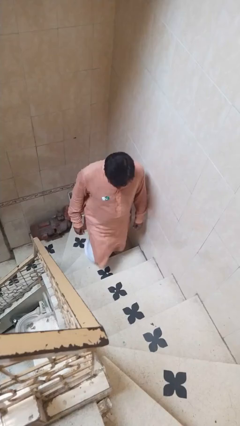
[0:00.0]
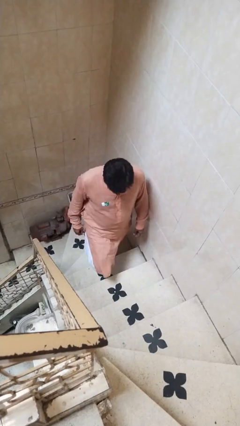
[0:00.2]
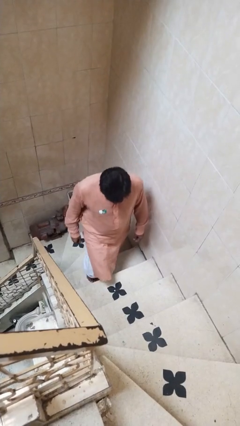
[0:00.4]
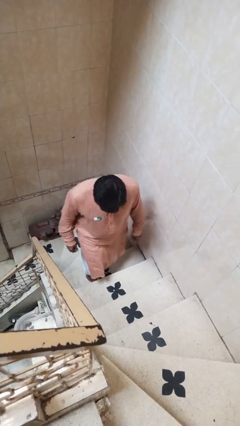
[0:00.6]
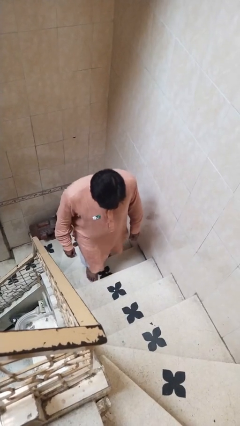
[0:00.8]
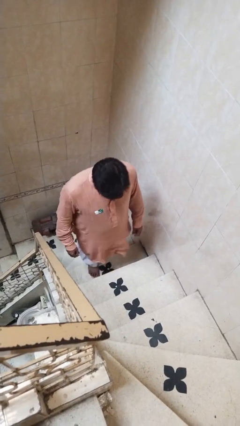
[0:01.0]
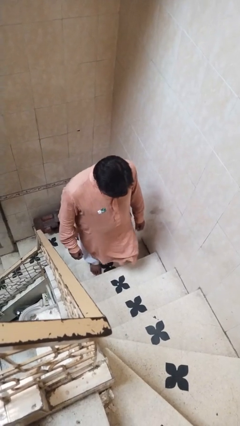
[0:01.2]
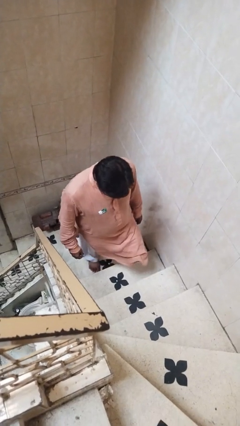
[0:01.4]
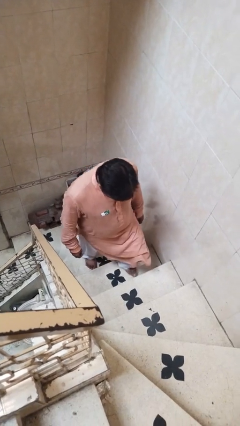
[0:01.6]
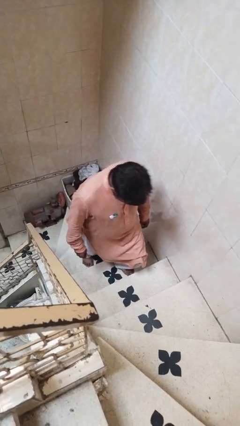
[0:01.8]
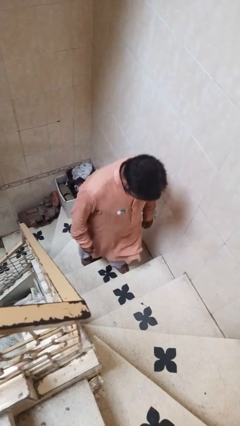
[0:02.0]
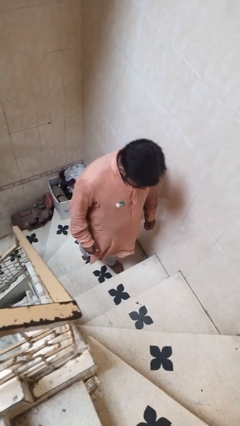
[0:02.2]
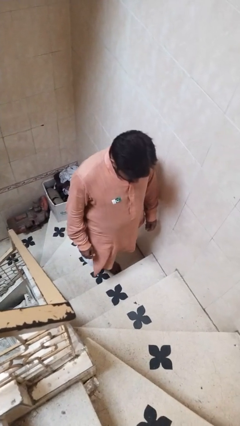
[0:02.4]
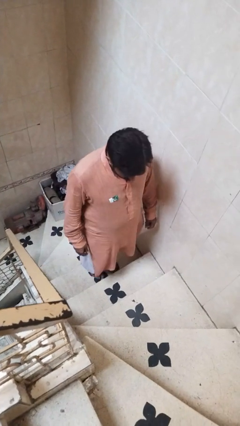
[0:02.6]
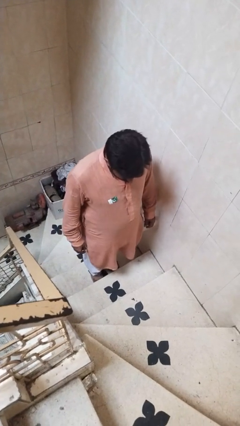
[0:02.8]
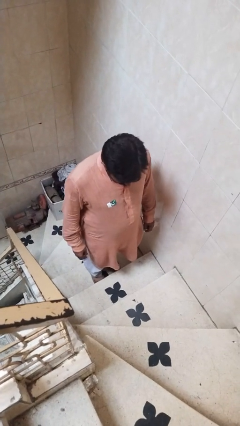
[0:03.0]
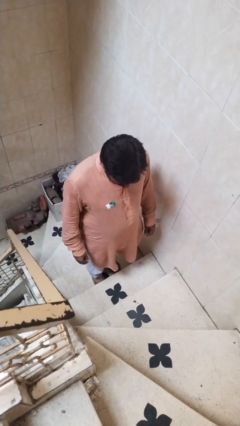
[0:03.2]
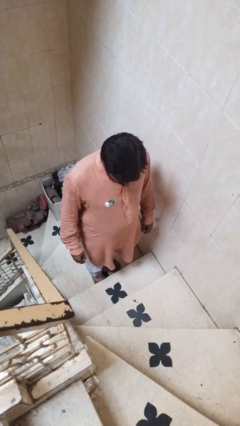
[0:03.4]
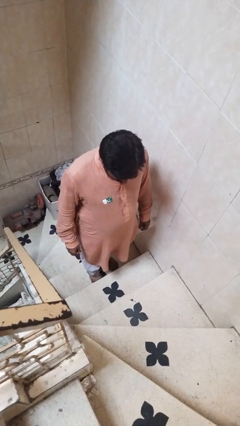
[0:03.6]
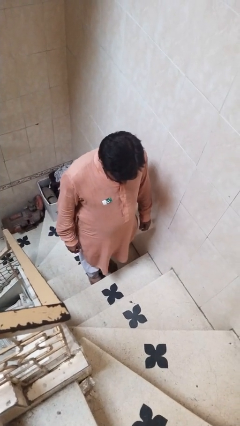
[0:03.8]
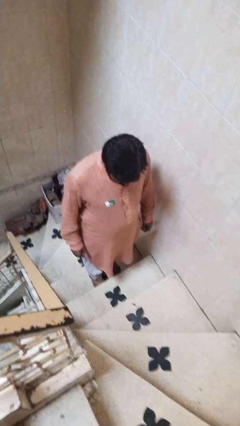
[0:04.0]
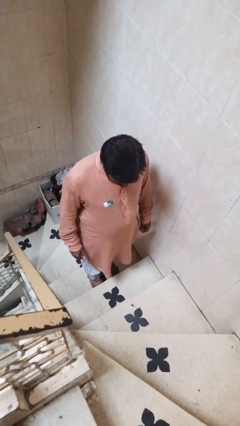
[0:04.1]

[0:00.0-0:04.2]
person climbs up stairs

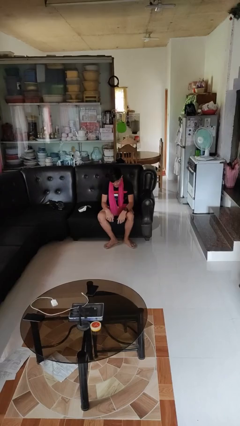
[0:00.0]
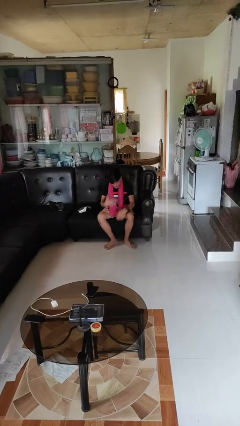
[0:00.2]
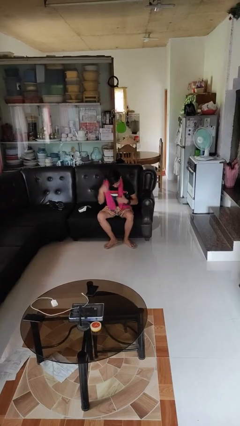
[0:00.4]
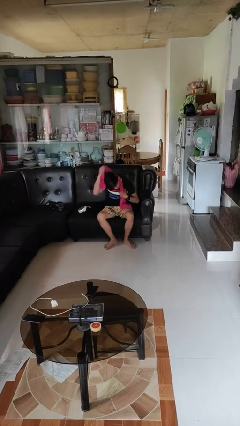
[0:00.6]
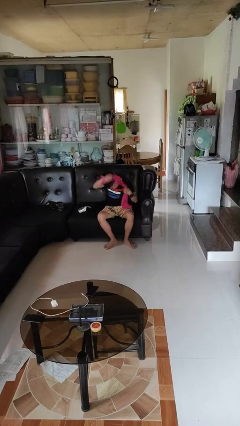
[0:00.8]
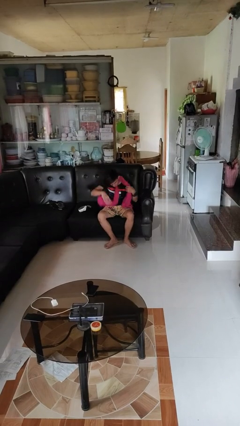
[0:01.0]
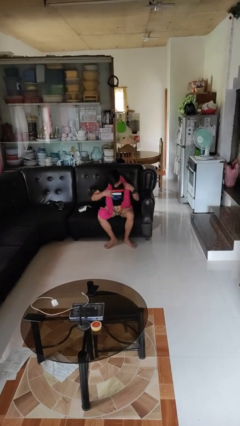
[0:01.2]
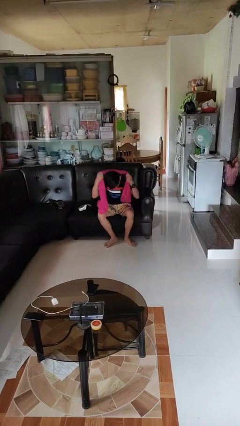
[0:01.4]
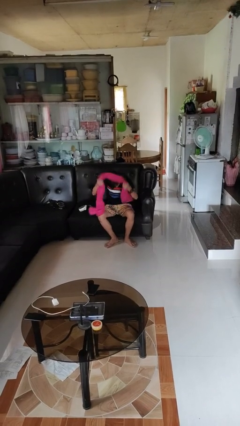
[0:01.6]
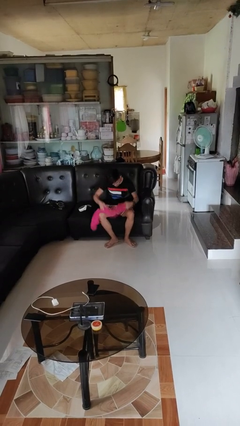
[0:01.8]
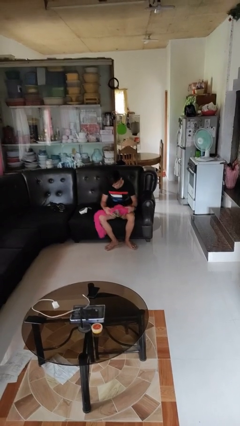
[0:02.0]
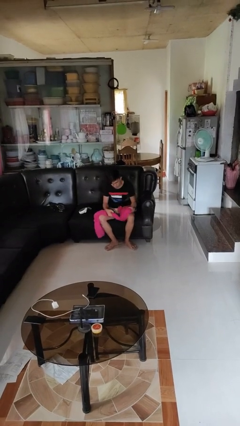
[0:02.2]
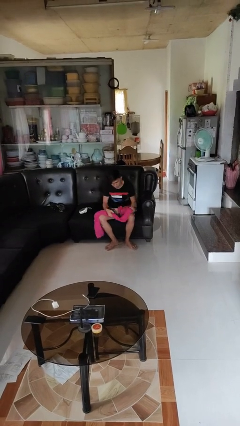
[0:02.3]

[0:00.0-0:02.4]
person takes off scarf

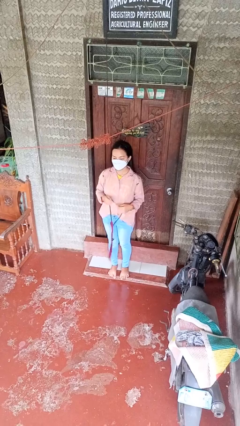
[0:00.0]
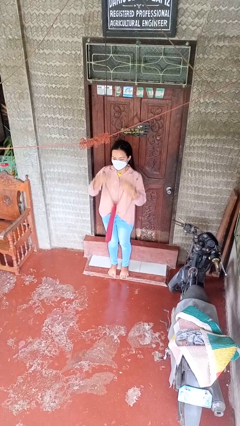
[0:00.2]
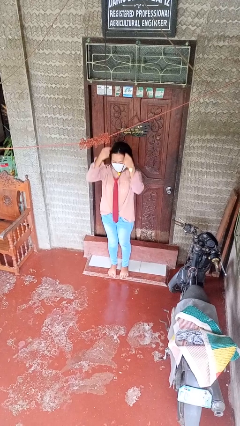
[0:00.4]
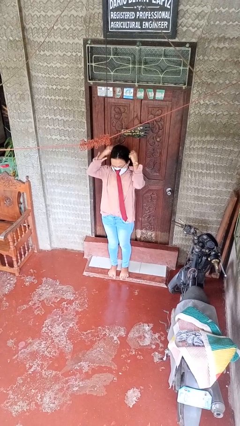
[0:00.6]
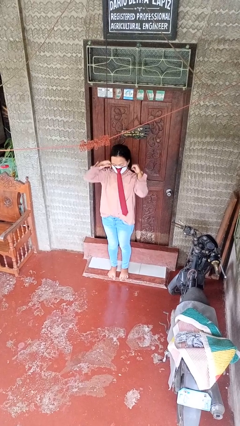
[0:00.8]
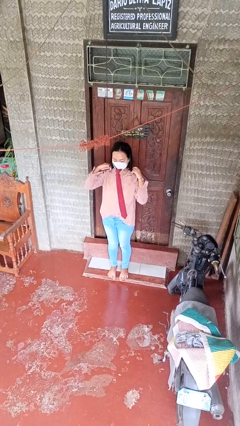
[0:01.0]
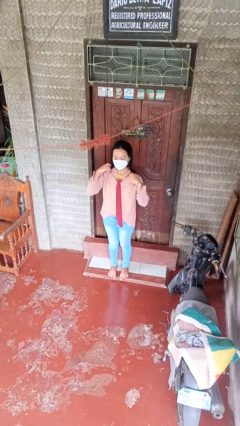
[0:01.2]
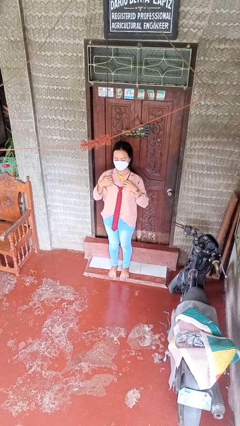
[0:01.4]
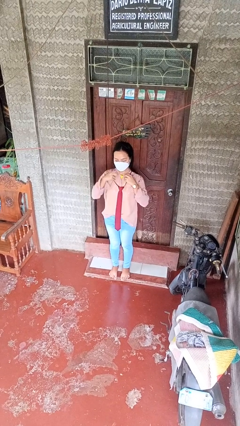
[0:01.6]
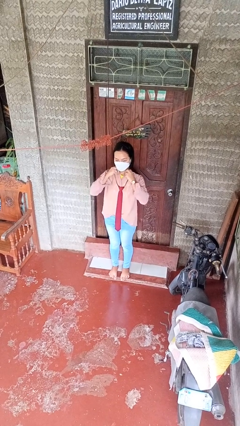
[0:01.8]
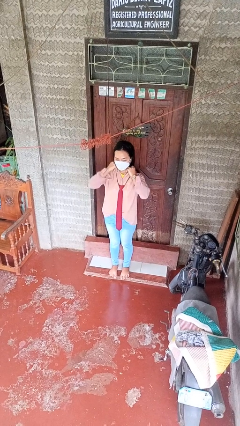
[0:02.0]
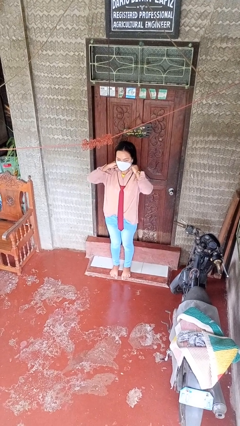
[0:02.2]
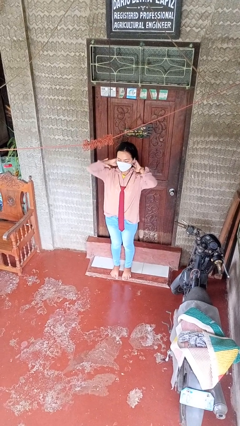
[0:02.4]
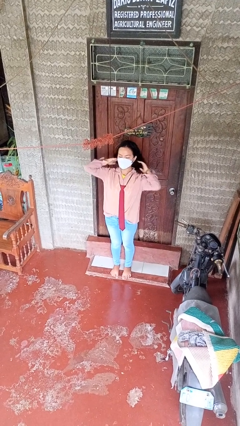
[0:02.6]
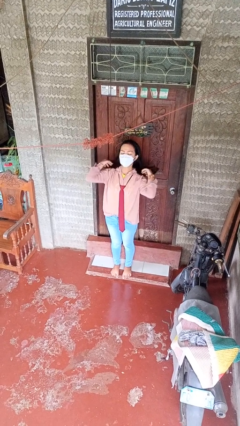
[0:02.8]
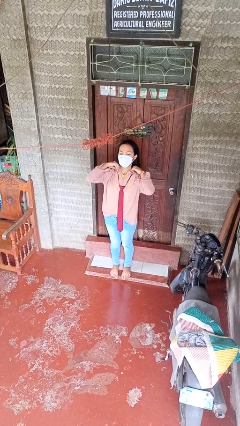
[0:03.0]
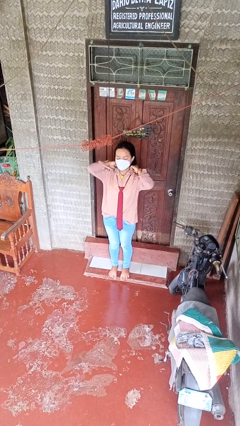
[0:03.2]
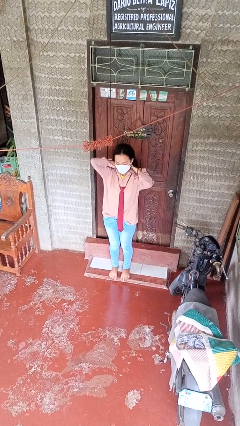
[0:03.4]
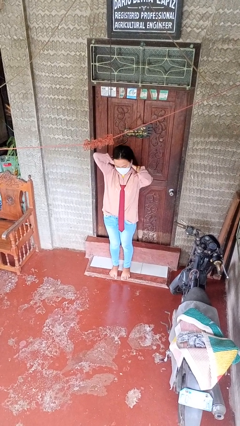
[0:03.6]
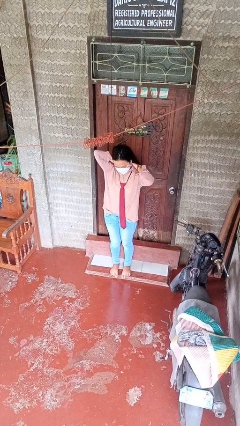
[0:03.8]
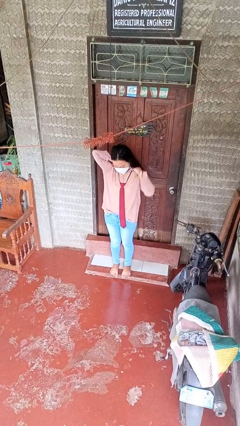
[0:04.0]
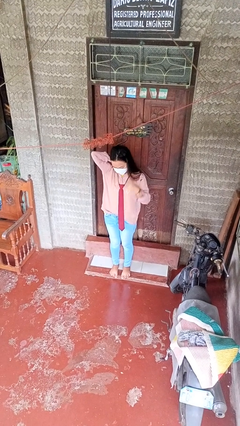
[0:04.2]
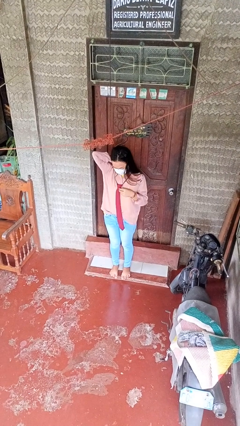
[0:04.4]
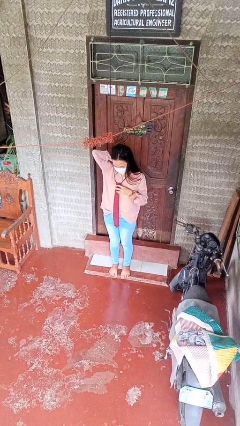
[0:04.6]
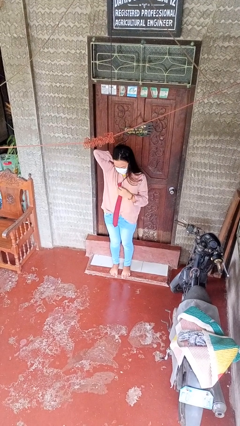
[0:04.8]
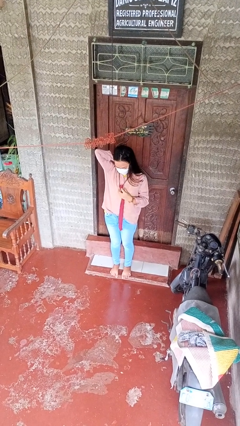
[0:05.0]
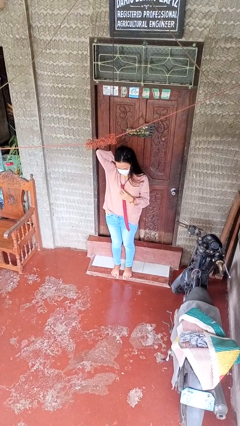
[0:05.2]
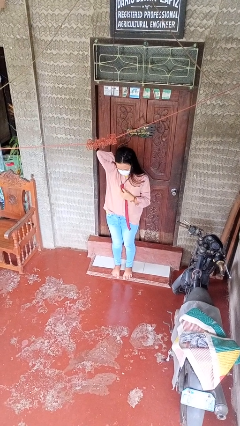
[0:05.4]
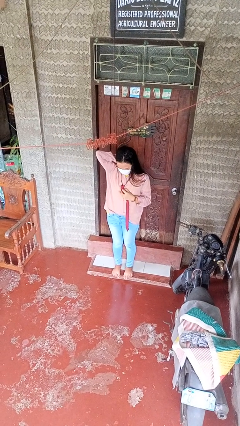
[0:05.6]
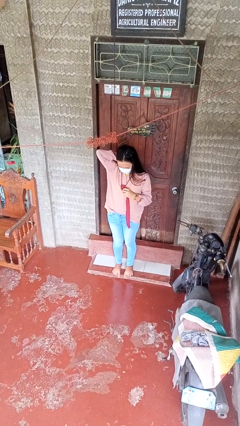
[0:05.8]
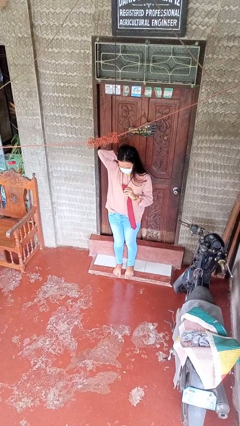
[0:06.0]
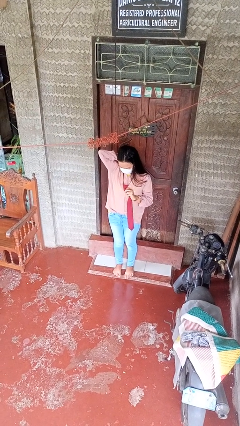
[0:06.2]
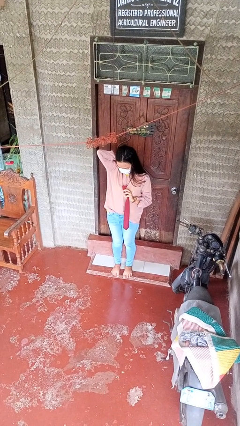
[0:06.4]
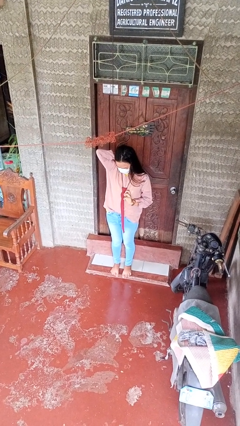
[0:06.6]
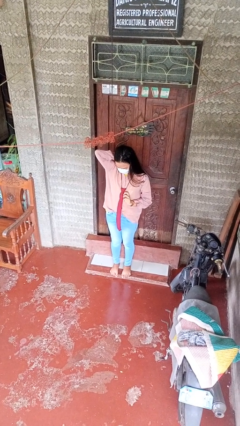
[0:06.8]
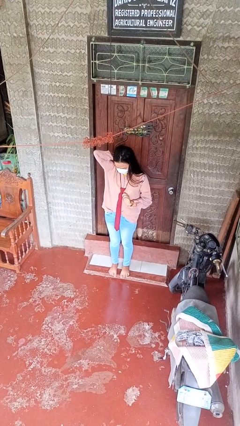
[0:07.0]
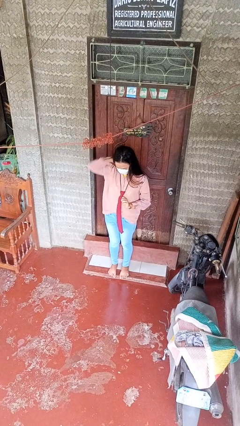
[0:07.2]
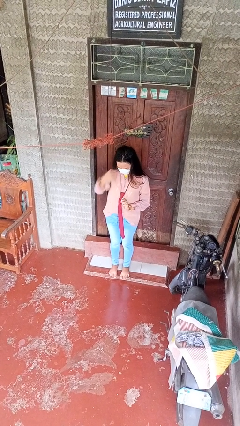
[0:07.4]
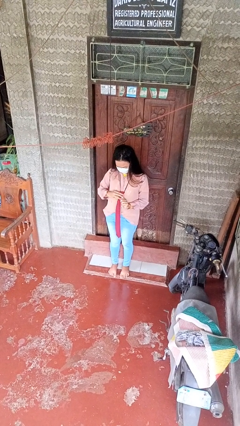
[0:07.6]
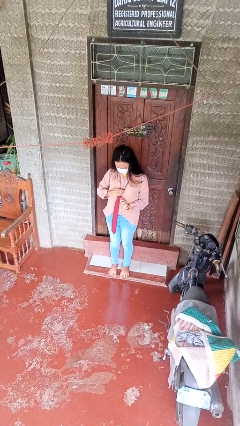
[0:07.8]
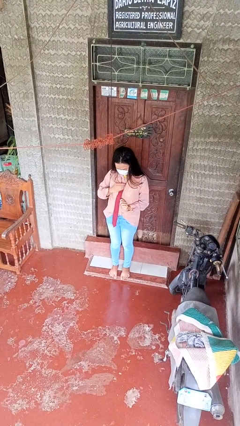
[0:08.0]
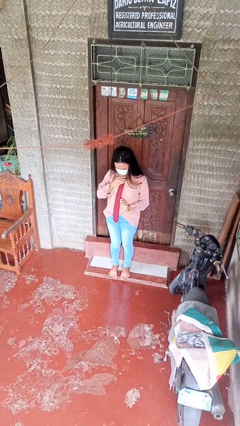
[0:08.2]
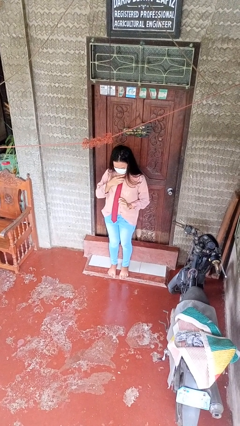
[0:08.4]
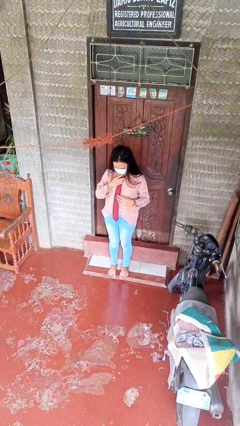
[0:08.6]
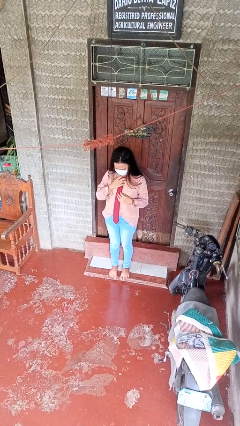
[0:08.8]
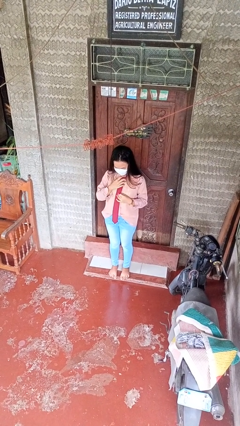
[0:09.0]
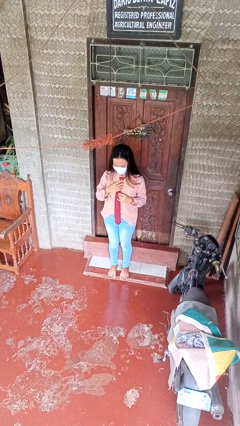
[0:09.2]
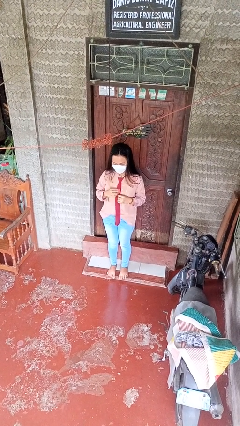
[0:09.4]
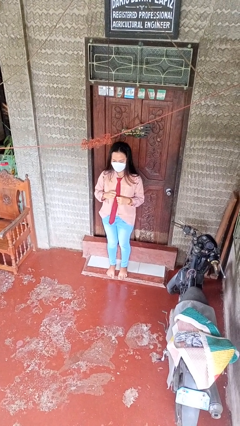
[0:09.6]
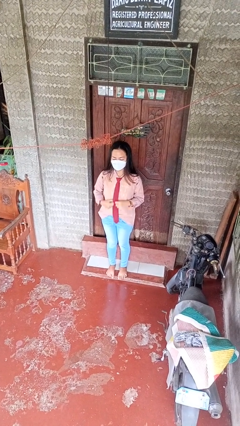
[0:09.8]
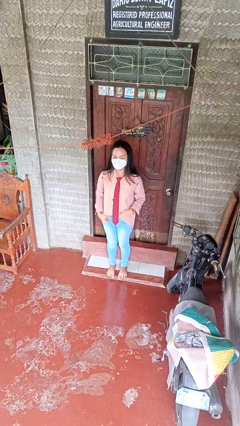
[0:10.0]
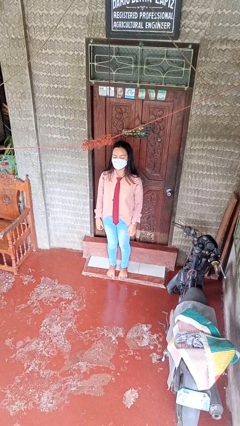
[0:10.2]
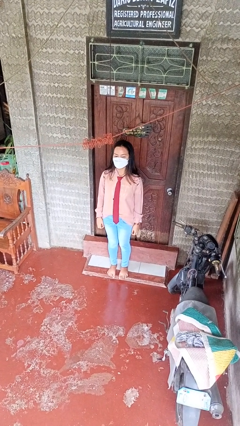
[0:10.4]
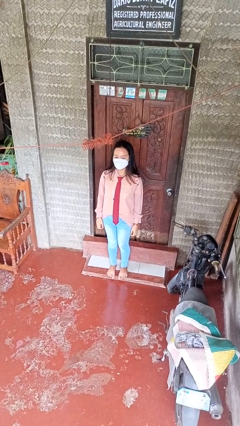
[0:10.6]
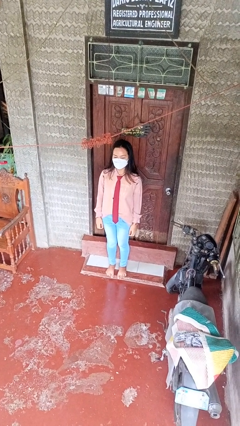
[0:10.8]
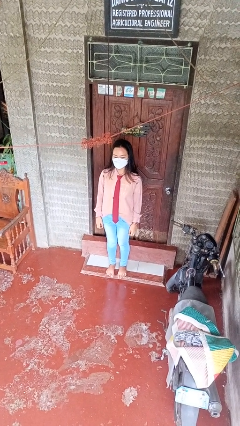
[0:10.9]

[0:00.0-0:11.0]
person puts on necktie

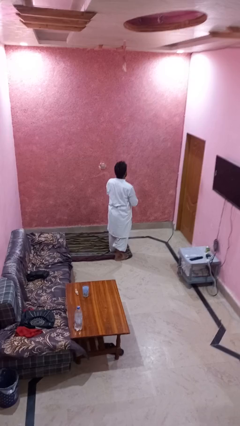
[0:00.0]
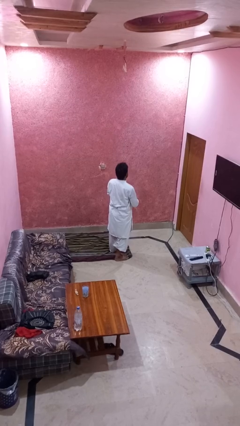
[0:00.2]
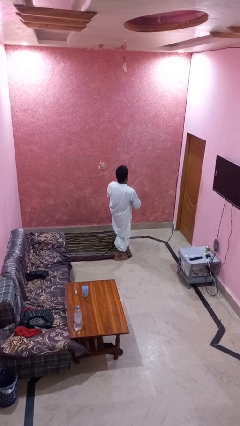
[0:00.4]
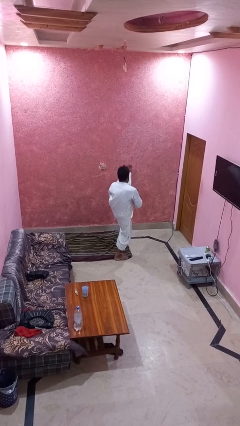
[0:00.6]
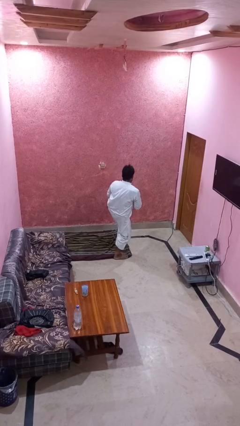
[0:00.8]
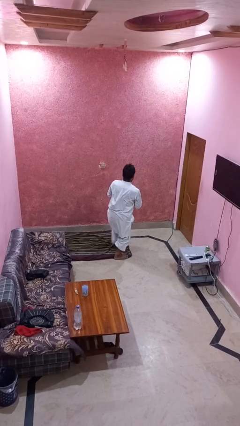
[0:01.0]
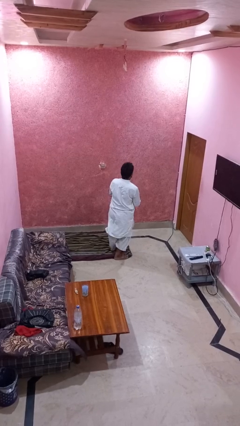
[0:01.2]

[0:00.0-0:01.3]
person karate kicks
